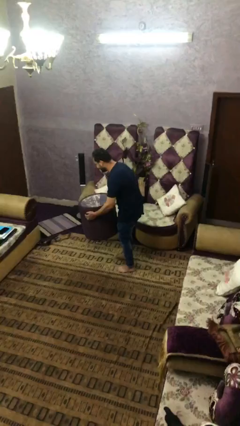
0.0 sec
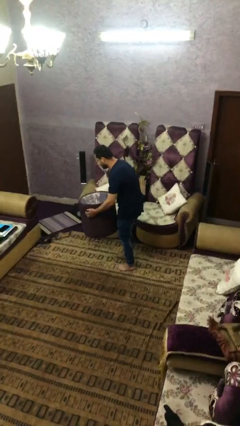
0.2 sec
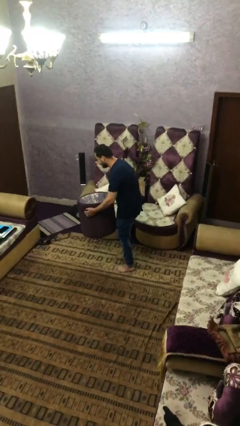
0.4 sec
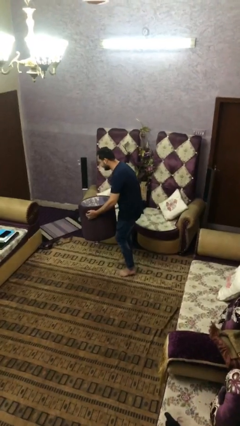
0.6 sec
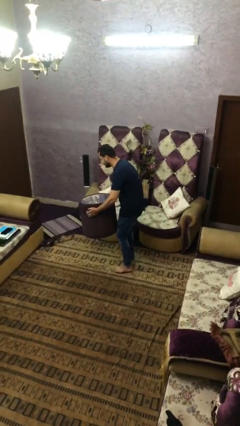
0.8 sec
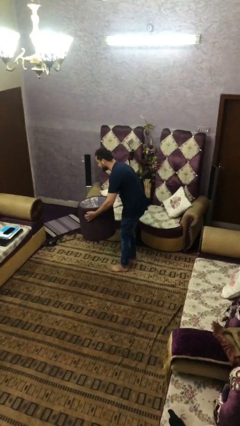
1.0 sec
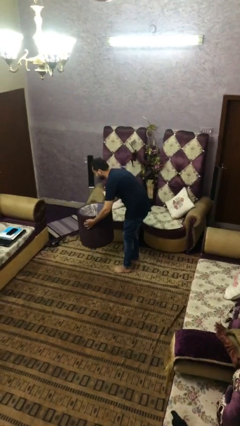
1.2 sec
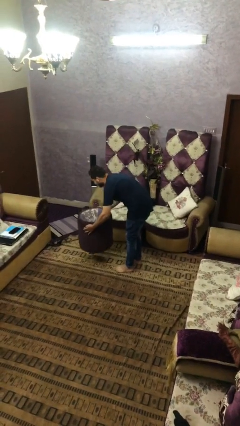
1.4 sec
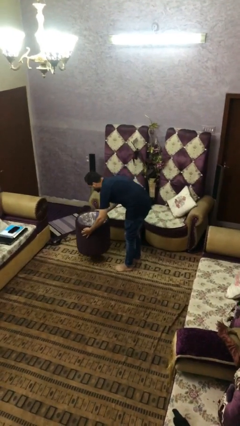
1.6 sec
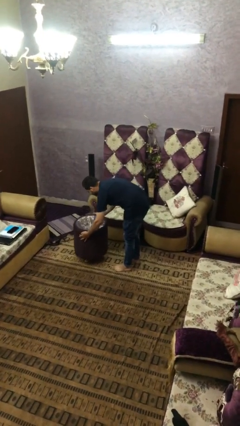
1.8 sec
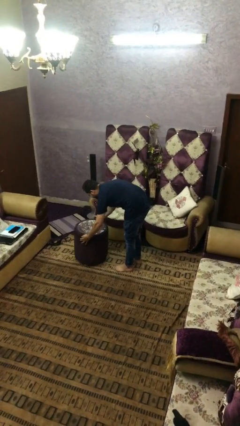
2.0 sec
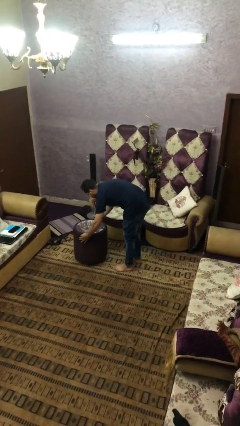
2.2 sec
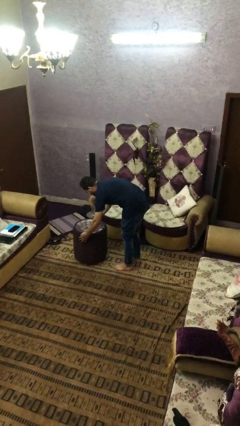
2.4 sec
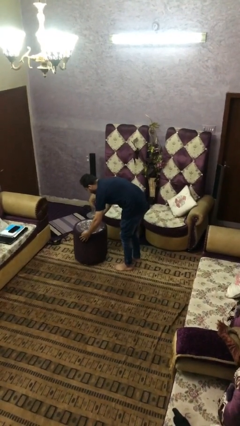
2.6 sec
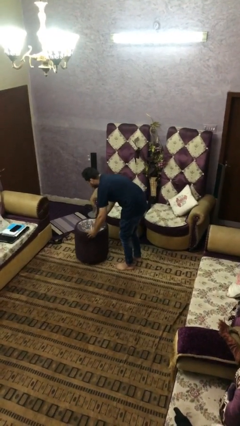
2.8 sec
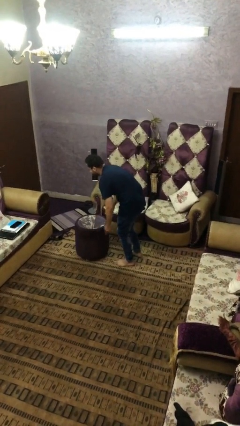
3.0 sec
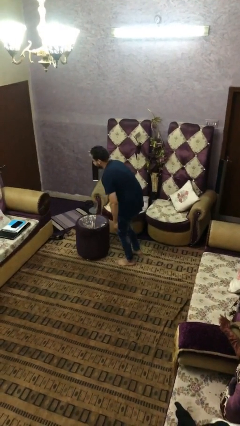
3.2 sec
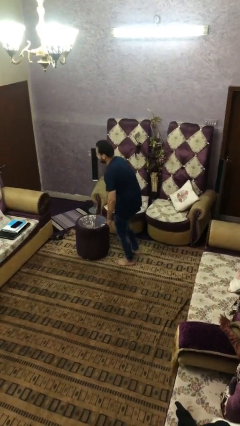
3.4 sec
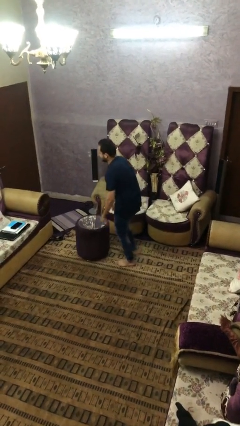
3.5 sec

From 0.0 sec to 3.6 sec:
person puts down object on floor

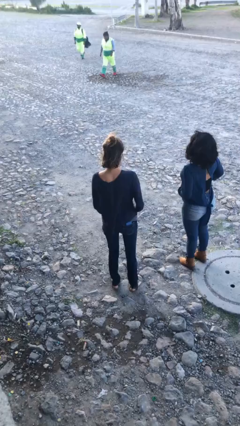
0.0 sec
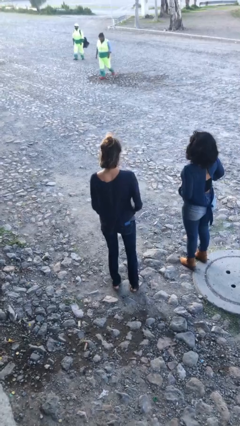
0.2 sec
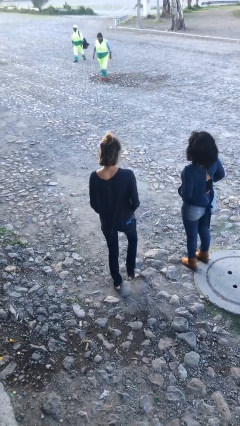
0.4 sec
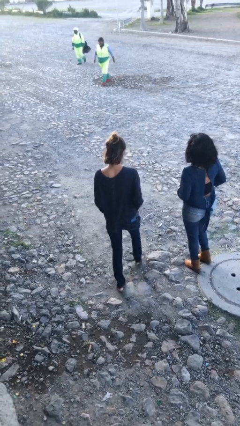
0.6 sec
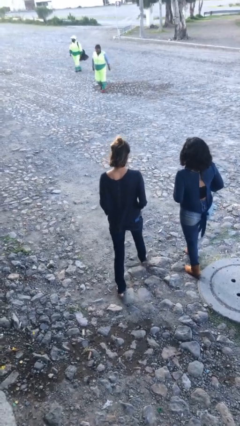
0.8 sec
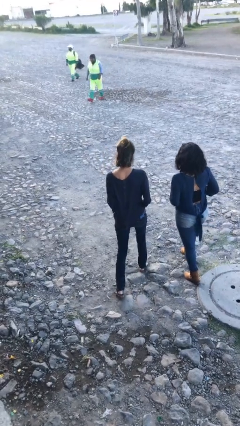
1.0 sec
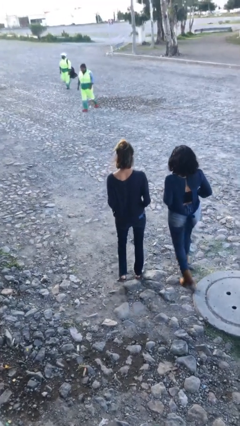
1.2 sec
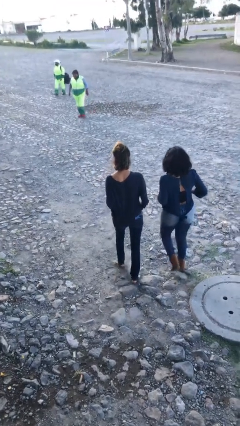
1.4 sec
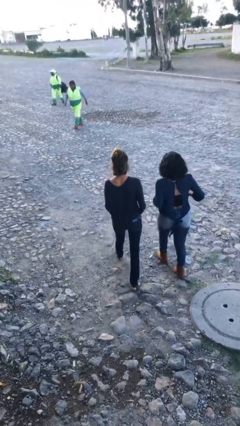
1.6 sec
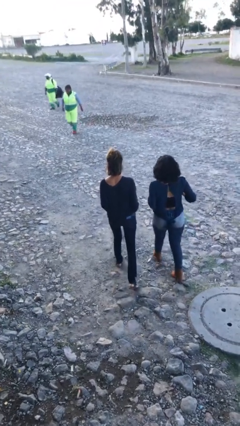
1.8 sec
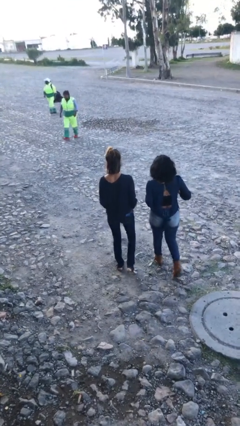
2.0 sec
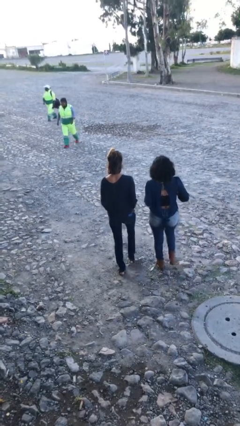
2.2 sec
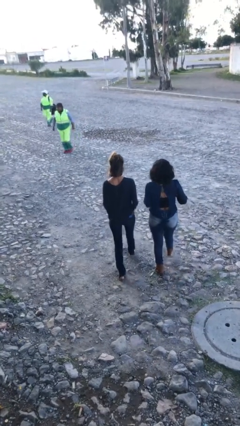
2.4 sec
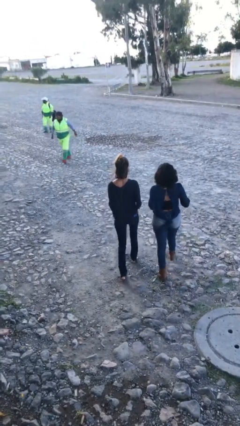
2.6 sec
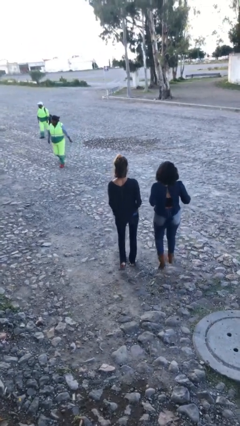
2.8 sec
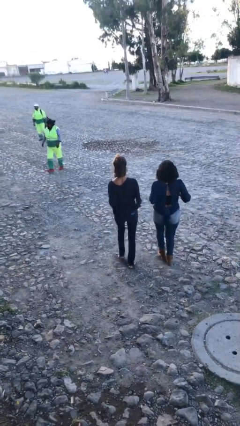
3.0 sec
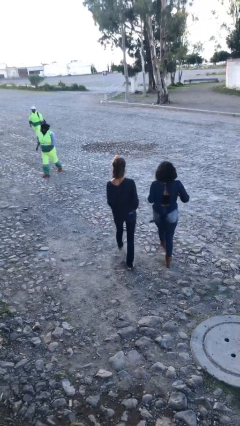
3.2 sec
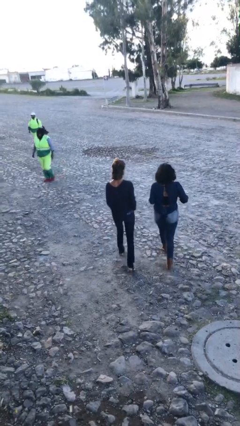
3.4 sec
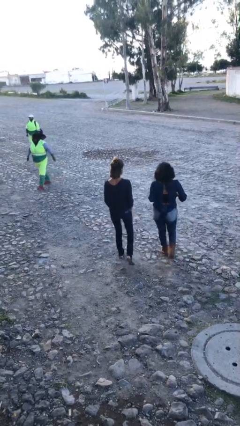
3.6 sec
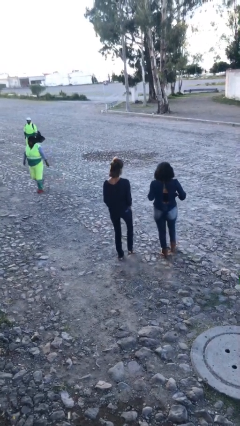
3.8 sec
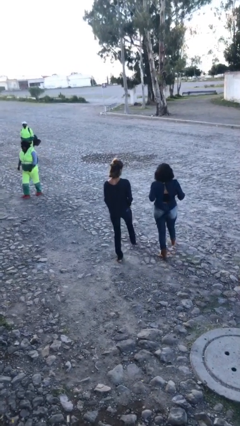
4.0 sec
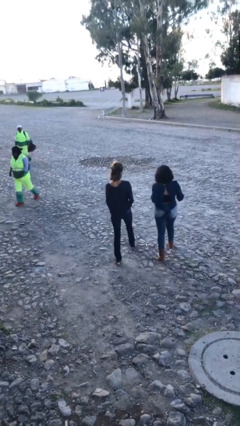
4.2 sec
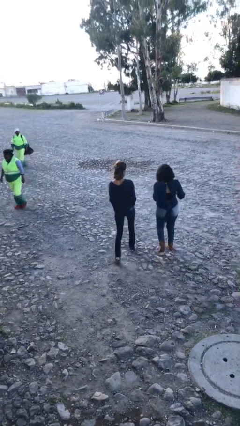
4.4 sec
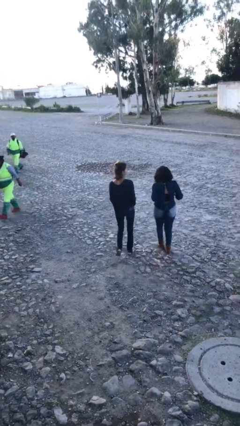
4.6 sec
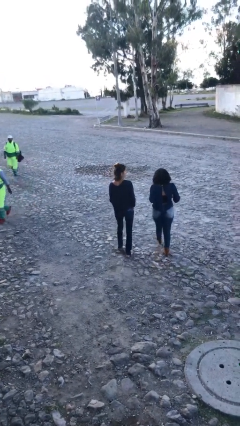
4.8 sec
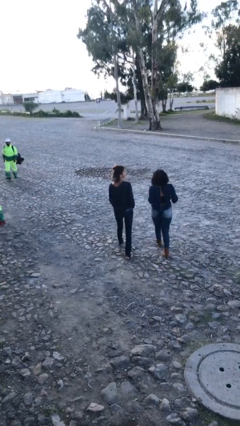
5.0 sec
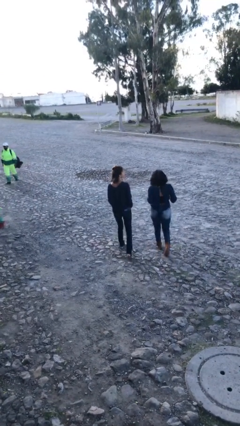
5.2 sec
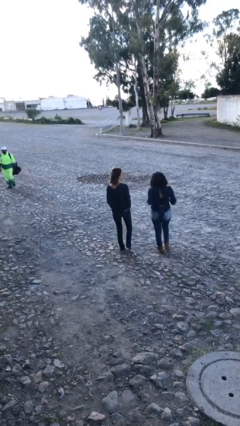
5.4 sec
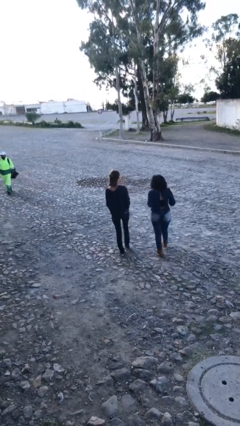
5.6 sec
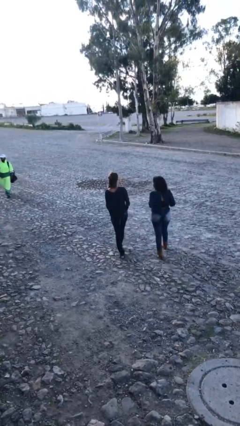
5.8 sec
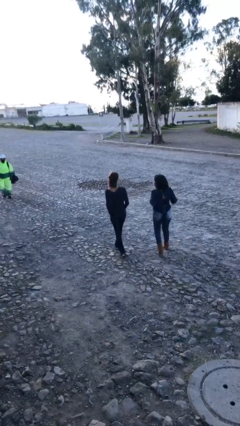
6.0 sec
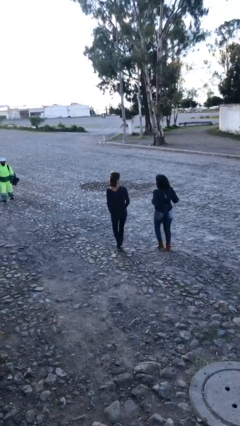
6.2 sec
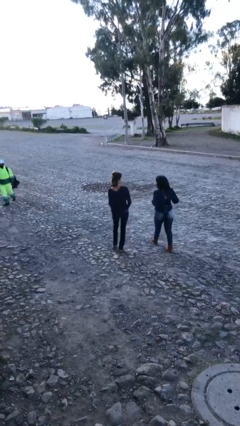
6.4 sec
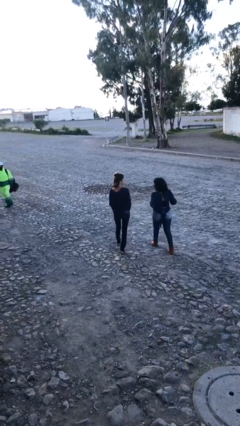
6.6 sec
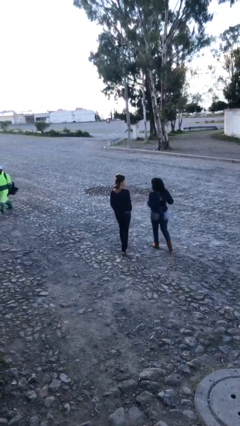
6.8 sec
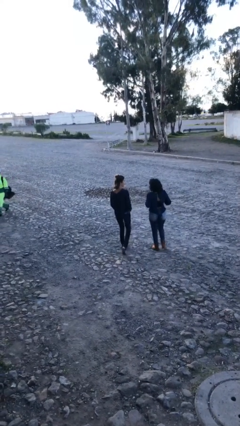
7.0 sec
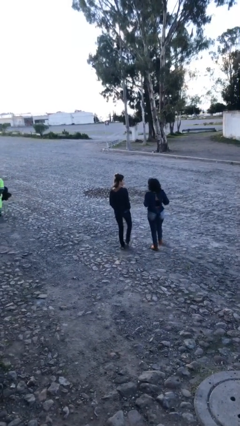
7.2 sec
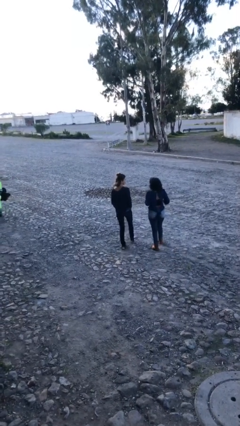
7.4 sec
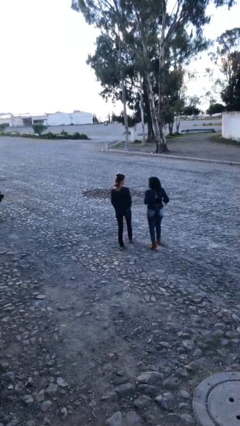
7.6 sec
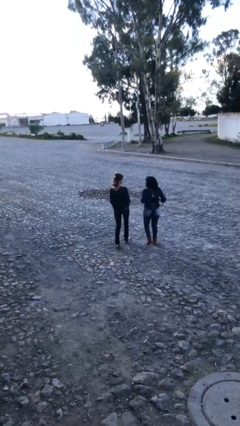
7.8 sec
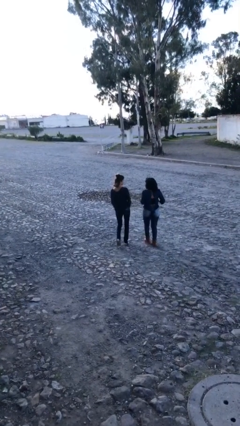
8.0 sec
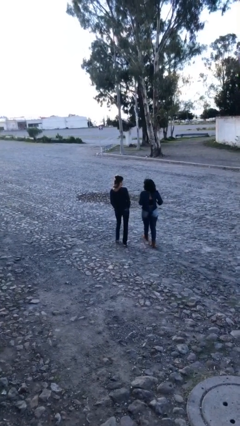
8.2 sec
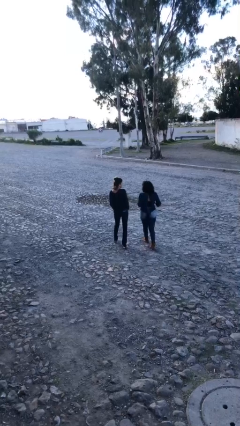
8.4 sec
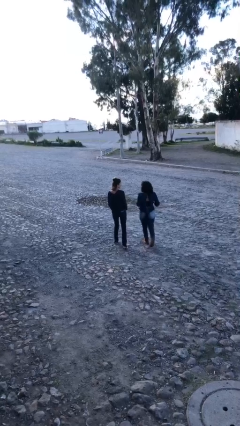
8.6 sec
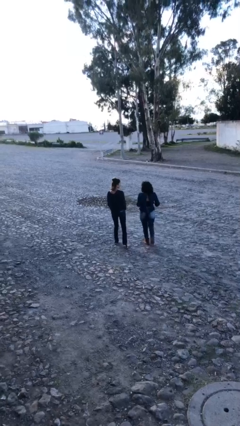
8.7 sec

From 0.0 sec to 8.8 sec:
person talks to person

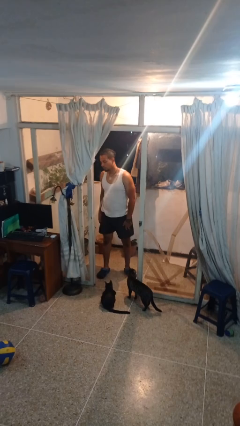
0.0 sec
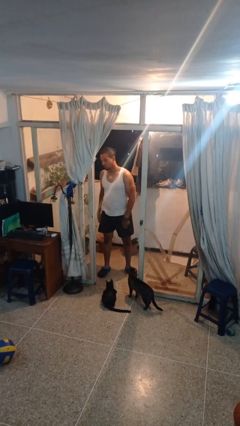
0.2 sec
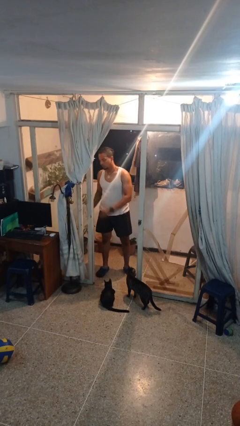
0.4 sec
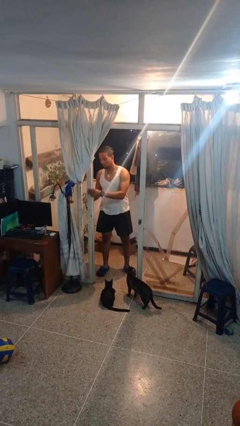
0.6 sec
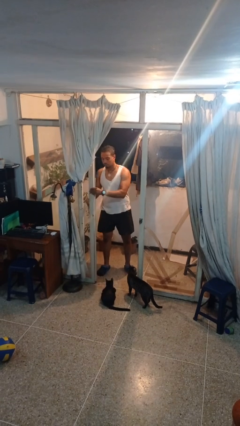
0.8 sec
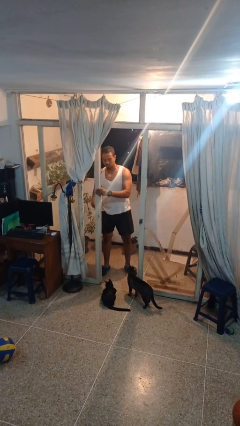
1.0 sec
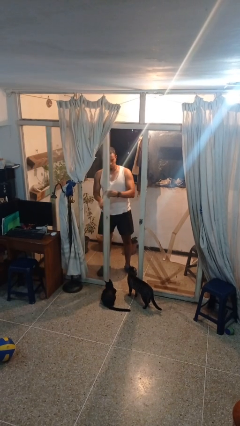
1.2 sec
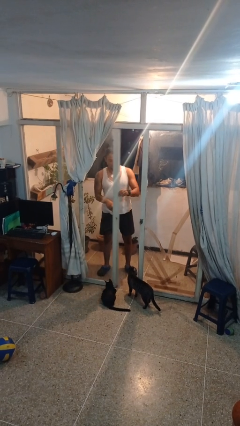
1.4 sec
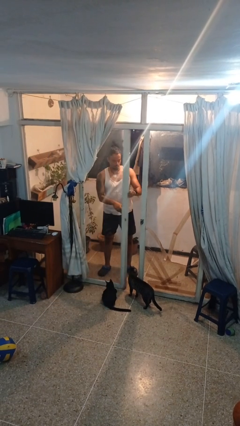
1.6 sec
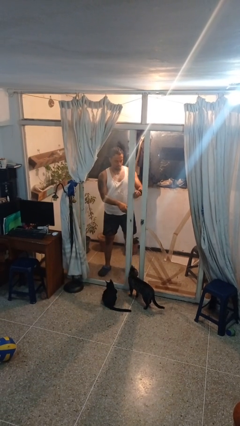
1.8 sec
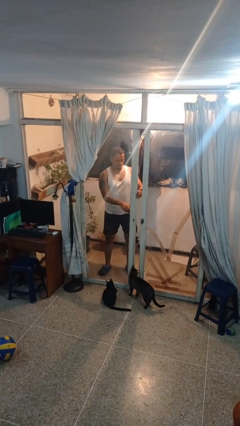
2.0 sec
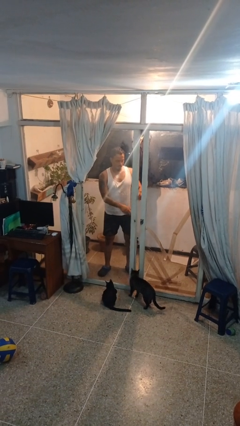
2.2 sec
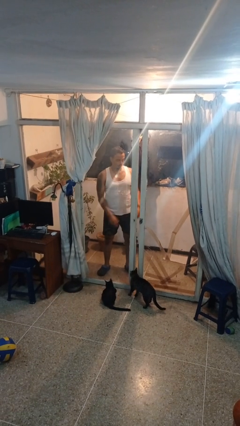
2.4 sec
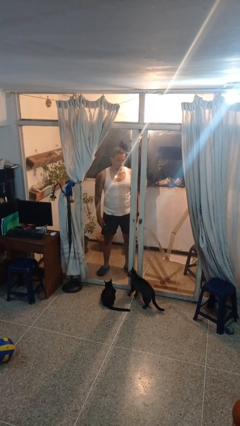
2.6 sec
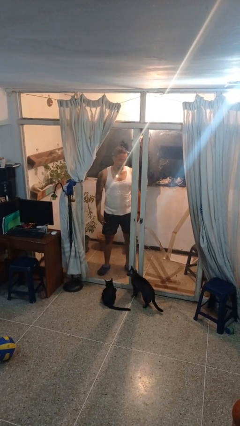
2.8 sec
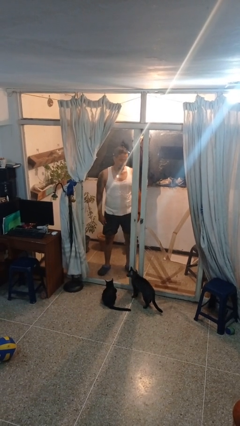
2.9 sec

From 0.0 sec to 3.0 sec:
person closes sliding door

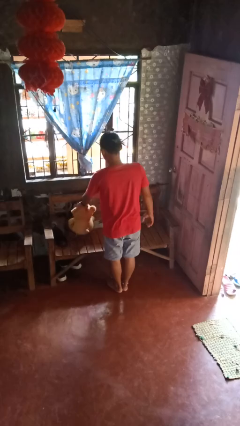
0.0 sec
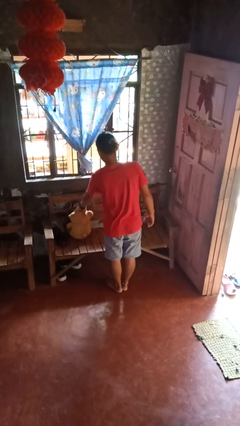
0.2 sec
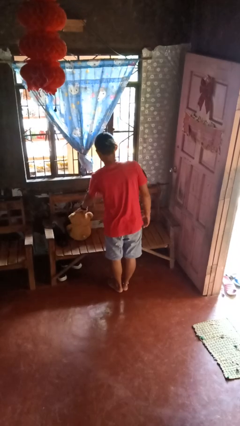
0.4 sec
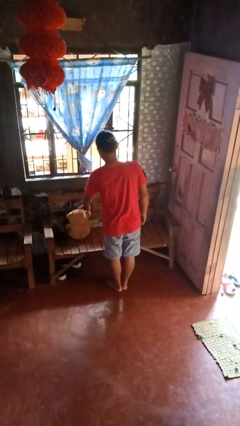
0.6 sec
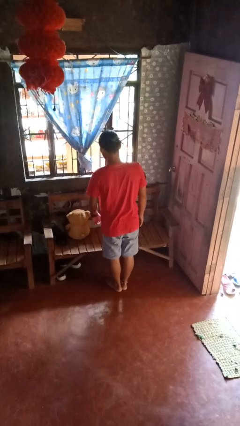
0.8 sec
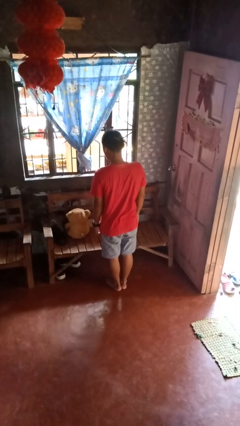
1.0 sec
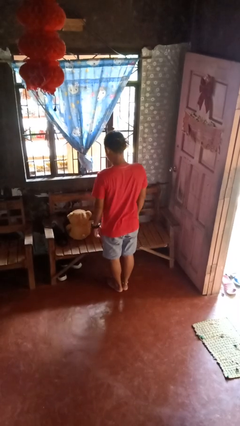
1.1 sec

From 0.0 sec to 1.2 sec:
person puts down object on couch

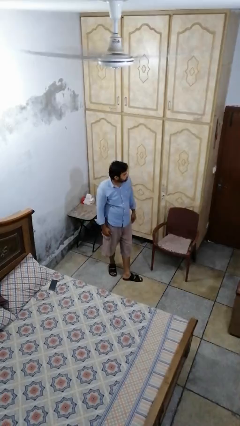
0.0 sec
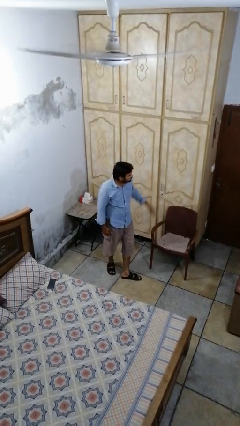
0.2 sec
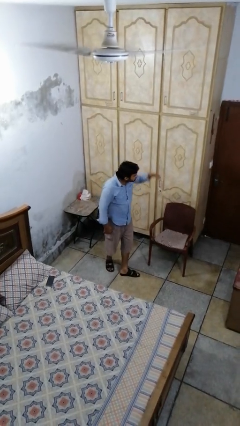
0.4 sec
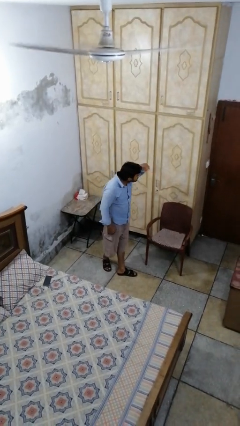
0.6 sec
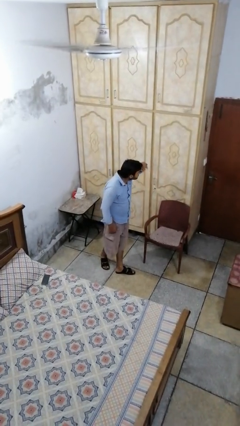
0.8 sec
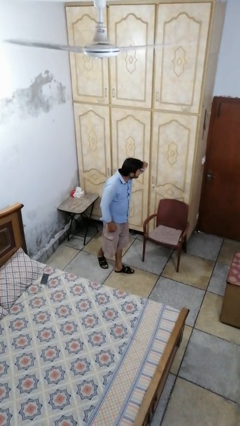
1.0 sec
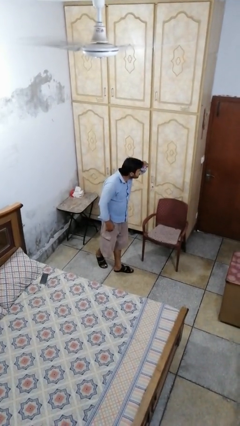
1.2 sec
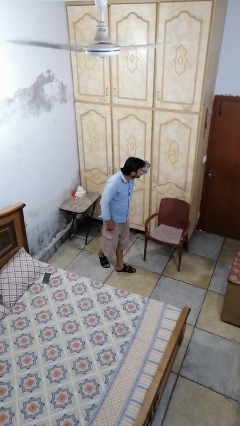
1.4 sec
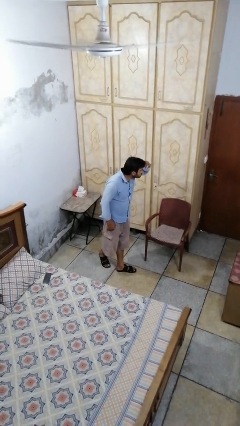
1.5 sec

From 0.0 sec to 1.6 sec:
person shades eyes
